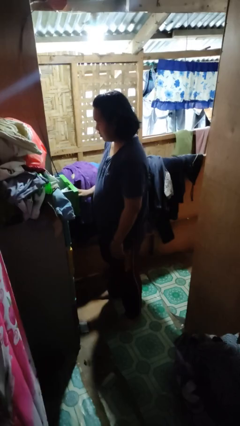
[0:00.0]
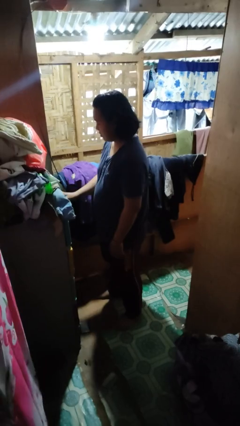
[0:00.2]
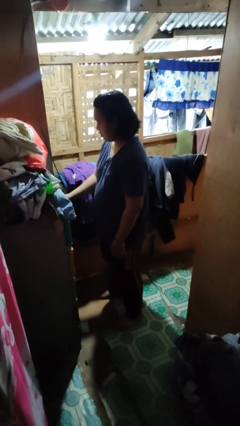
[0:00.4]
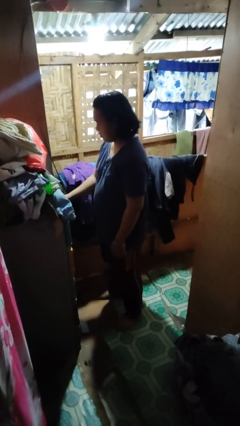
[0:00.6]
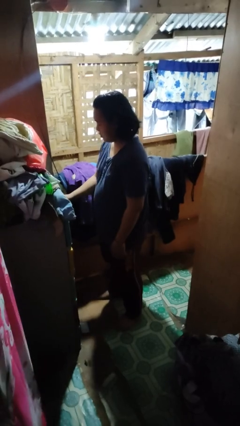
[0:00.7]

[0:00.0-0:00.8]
person closes dresser drawer

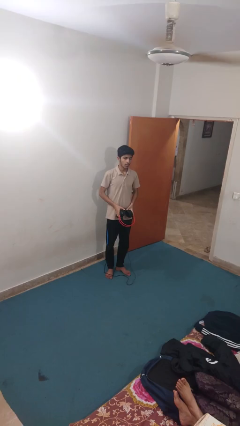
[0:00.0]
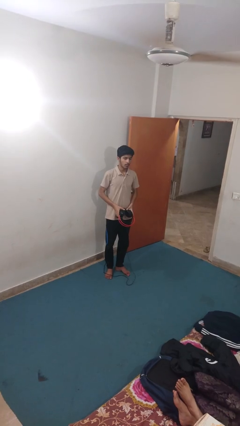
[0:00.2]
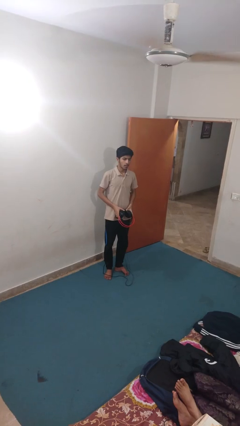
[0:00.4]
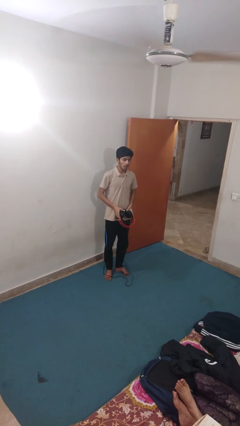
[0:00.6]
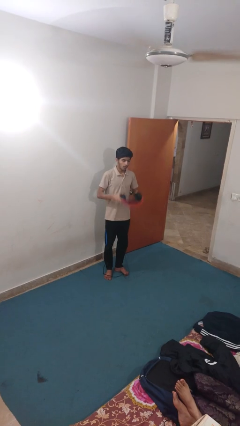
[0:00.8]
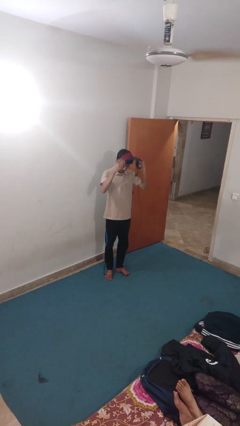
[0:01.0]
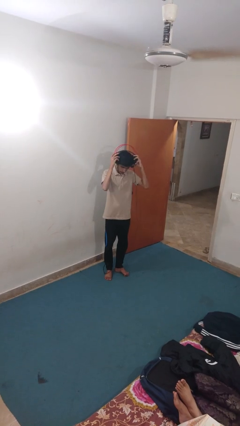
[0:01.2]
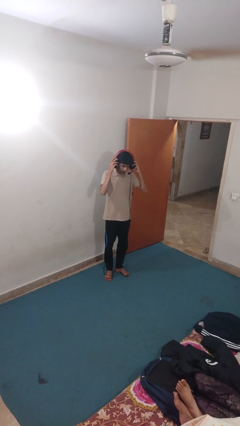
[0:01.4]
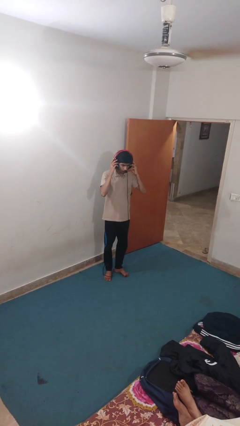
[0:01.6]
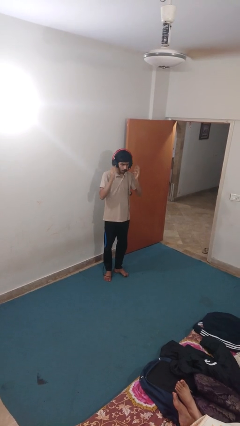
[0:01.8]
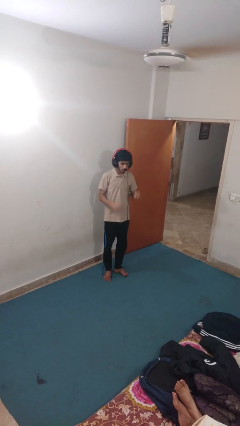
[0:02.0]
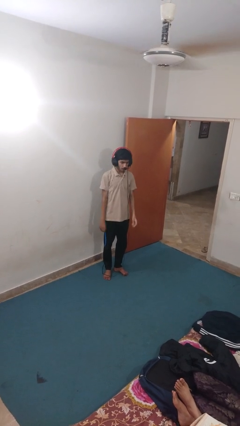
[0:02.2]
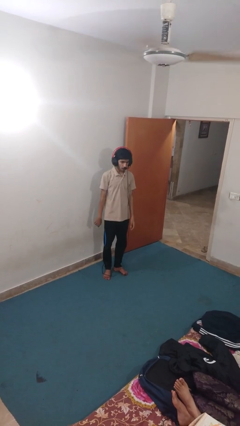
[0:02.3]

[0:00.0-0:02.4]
person puts on headphones

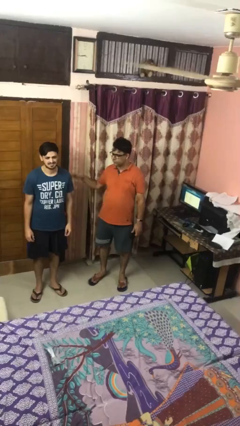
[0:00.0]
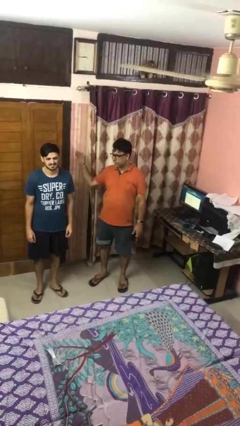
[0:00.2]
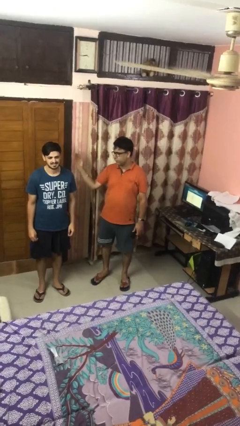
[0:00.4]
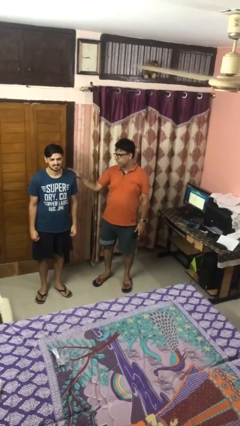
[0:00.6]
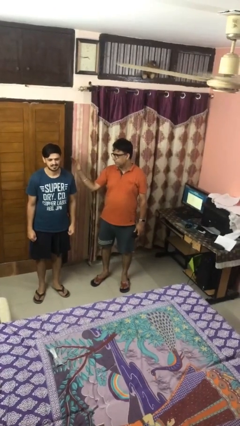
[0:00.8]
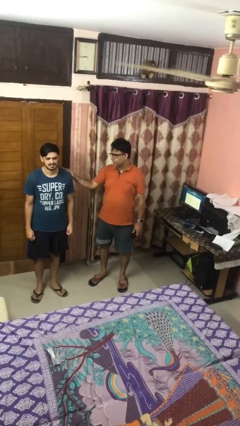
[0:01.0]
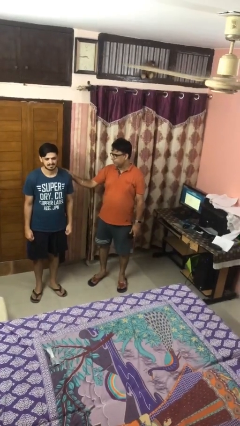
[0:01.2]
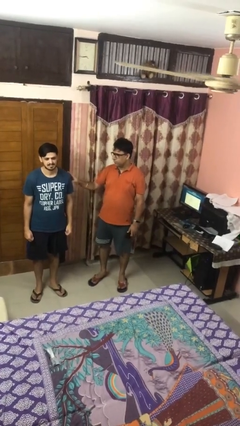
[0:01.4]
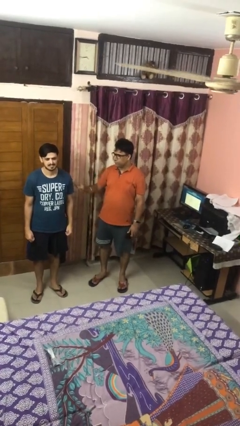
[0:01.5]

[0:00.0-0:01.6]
person pounds shoulders of person

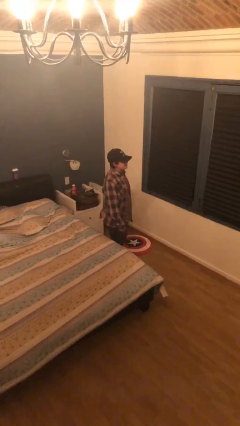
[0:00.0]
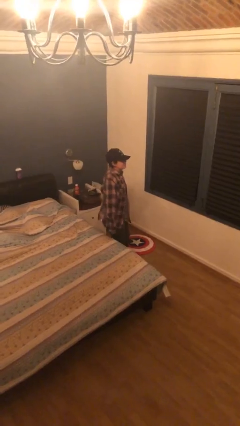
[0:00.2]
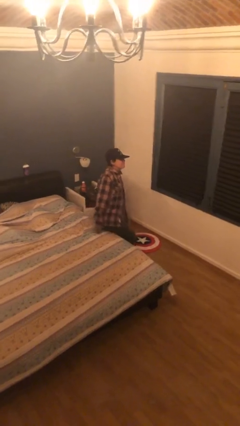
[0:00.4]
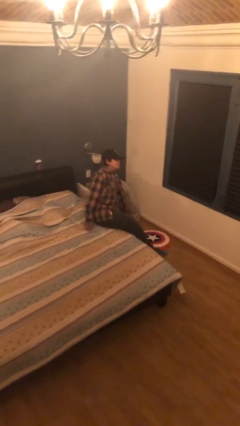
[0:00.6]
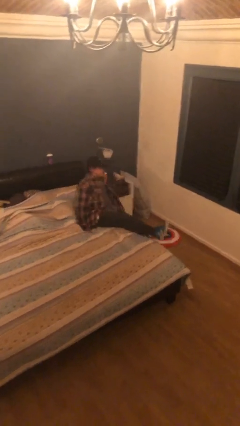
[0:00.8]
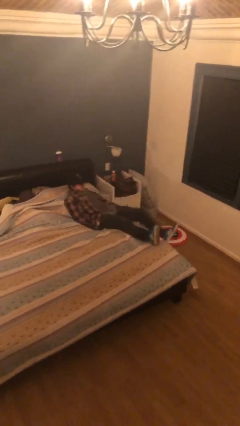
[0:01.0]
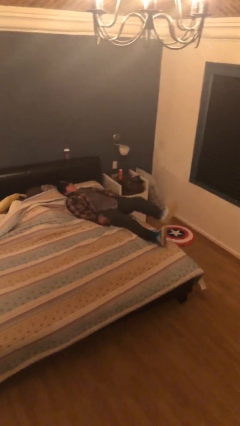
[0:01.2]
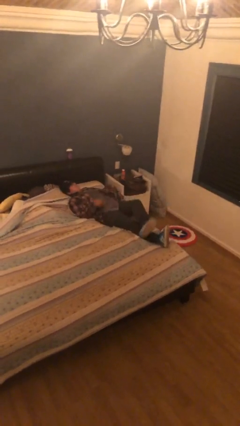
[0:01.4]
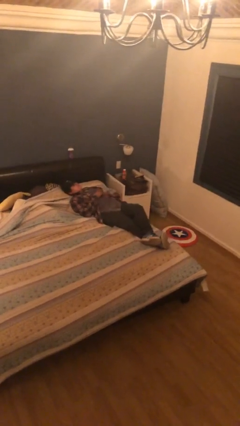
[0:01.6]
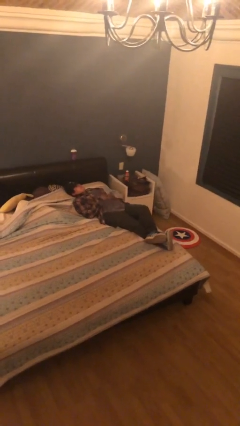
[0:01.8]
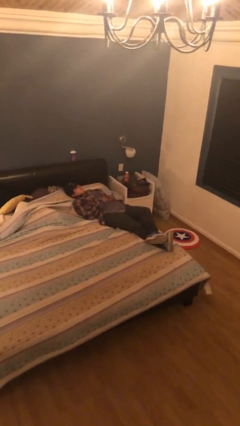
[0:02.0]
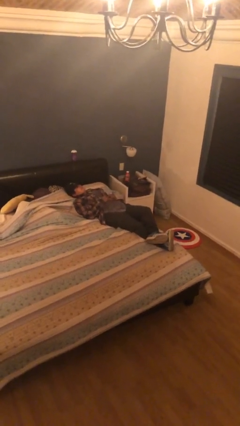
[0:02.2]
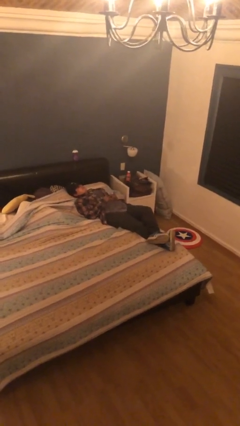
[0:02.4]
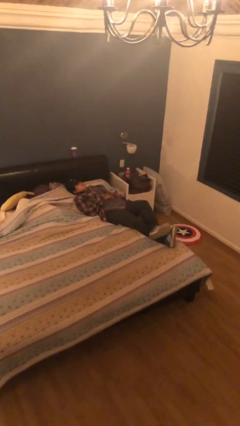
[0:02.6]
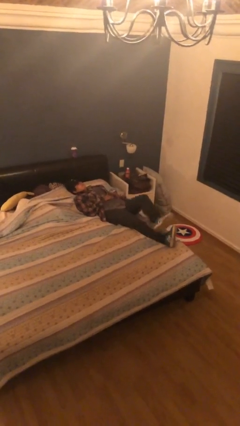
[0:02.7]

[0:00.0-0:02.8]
person lies down on bed

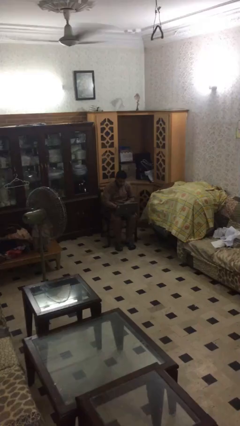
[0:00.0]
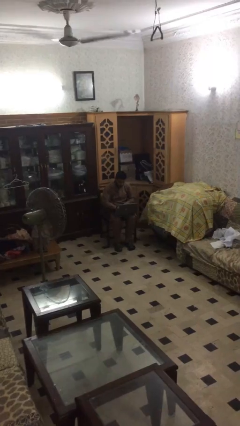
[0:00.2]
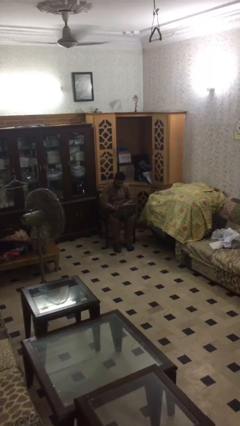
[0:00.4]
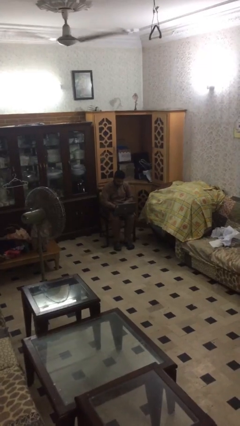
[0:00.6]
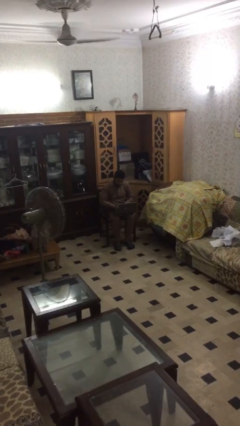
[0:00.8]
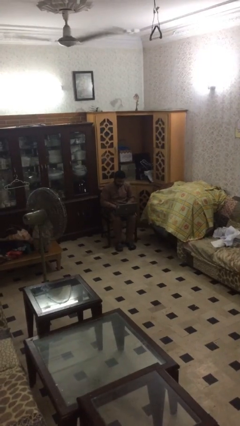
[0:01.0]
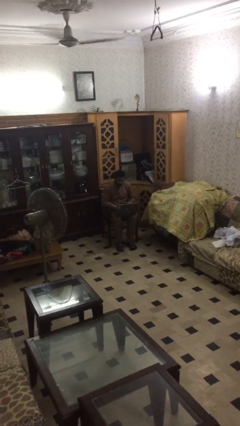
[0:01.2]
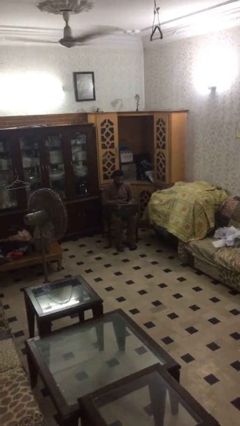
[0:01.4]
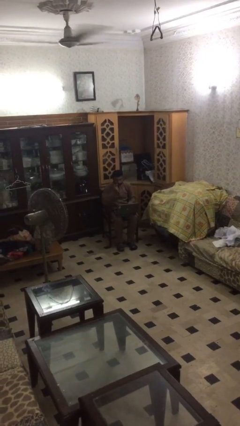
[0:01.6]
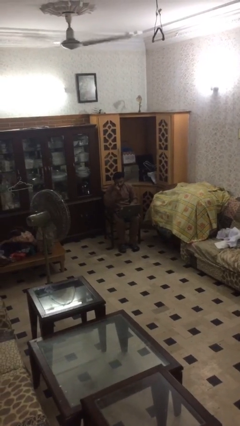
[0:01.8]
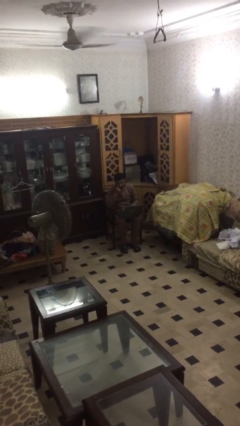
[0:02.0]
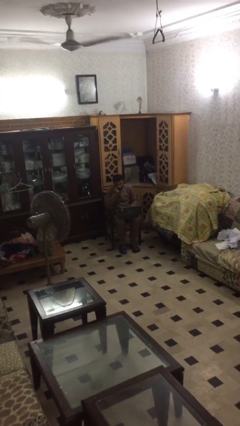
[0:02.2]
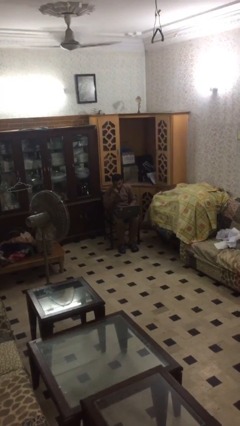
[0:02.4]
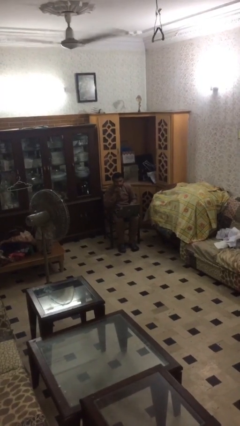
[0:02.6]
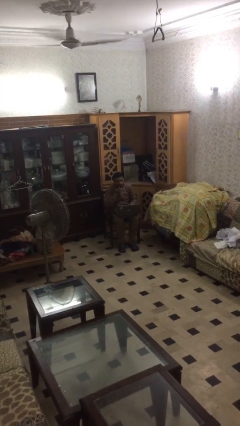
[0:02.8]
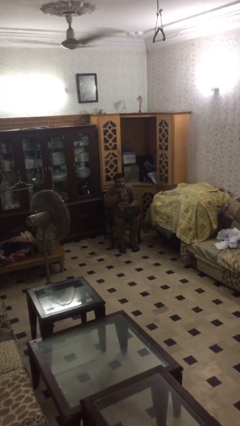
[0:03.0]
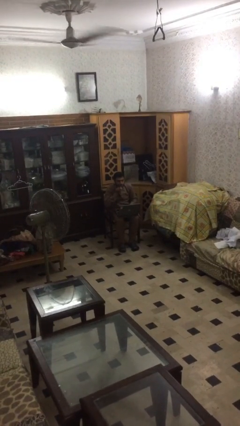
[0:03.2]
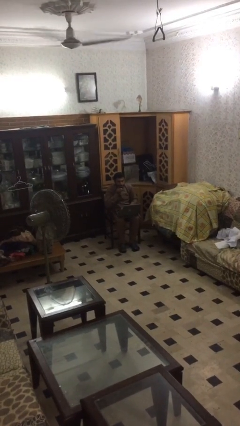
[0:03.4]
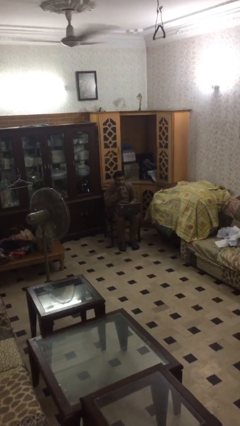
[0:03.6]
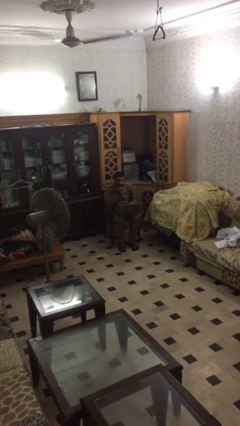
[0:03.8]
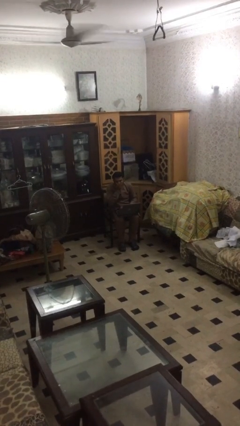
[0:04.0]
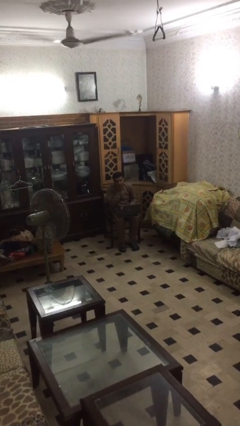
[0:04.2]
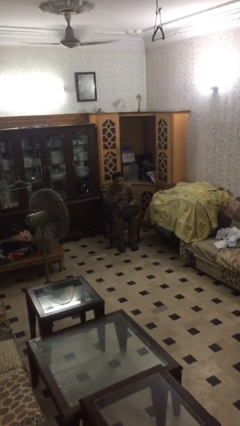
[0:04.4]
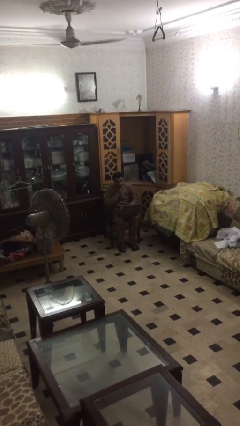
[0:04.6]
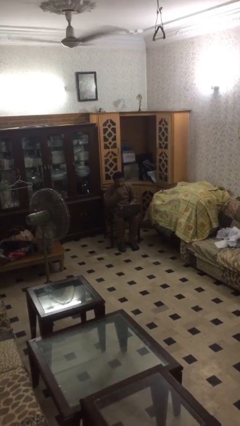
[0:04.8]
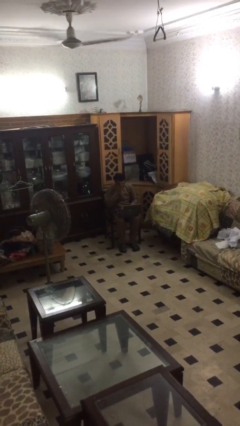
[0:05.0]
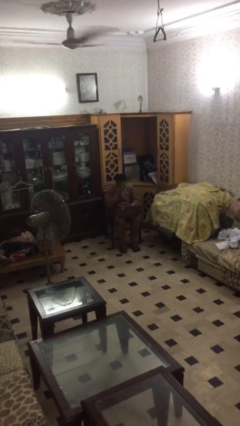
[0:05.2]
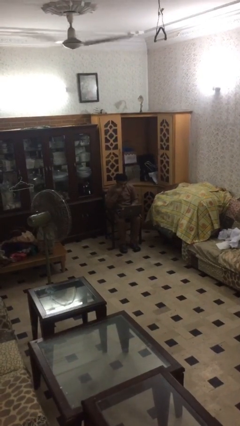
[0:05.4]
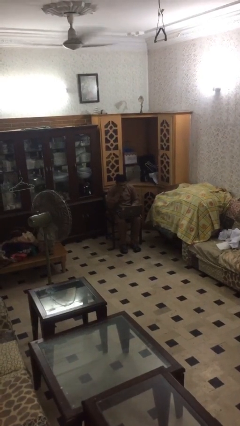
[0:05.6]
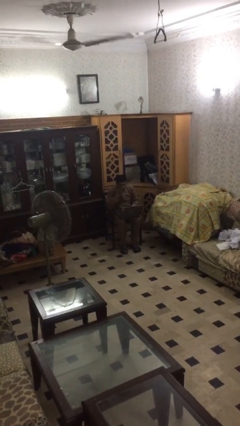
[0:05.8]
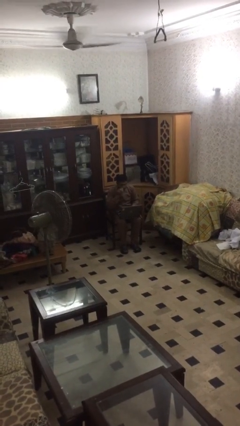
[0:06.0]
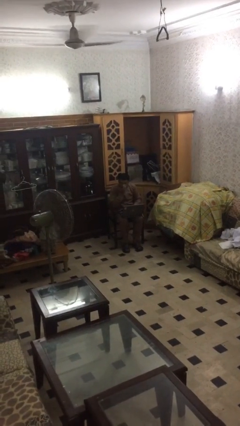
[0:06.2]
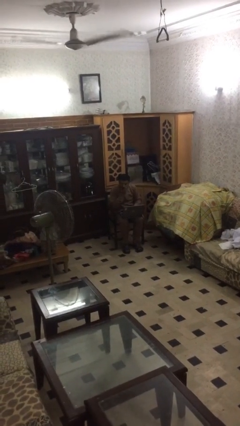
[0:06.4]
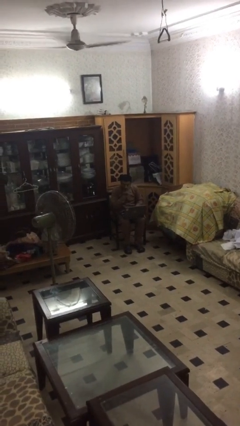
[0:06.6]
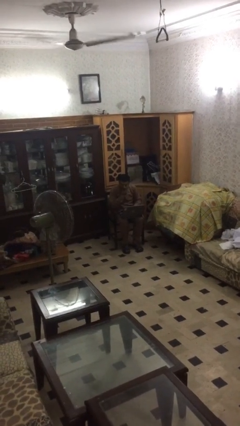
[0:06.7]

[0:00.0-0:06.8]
person interacts with laptop

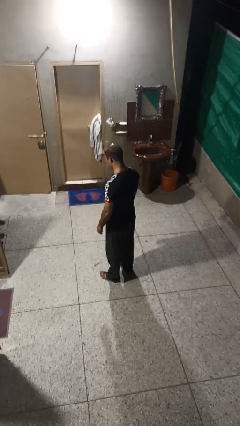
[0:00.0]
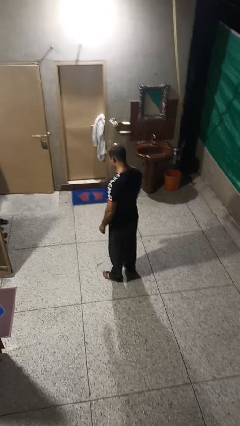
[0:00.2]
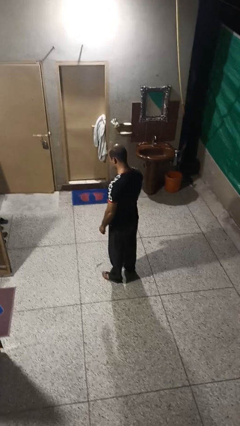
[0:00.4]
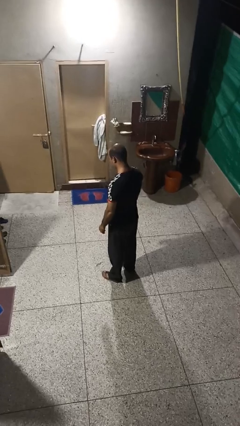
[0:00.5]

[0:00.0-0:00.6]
person rubs neck

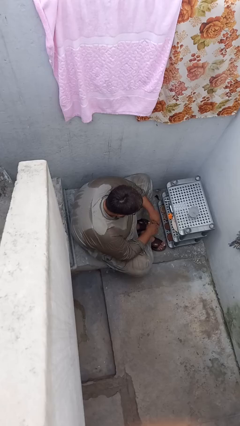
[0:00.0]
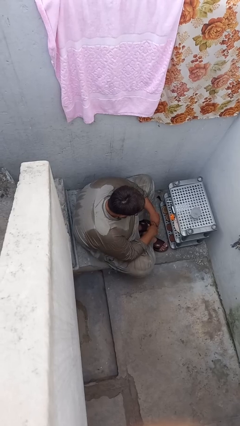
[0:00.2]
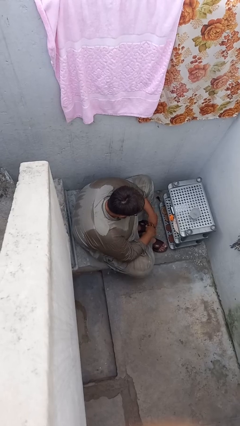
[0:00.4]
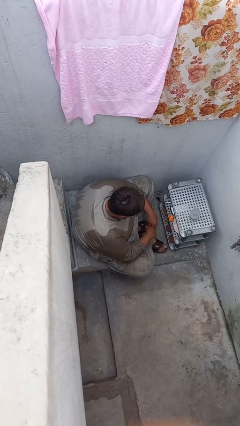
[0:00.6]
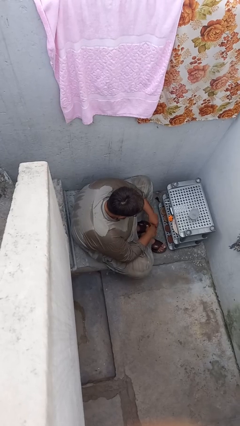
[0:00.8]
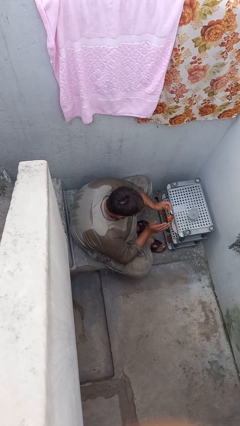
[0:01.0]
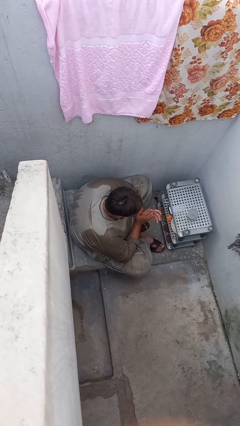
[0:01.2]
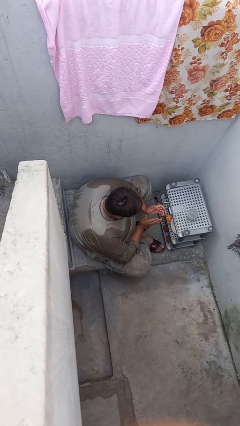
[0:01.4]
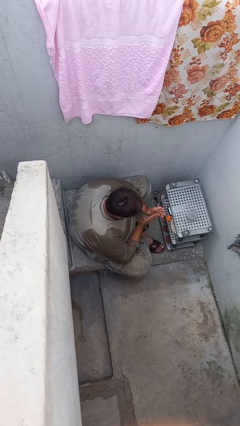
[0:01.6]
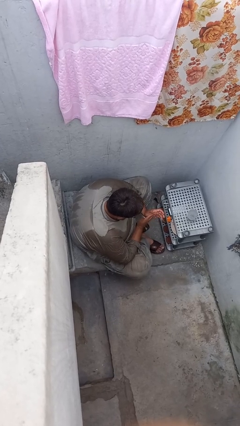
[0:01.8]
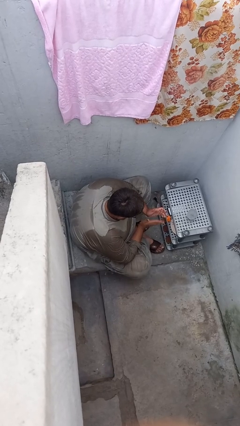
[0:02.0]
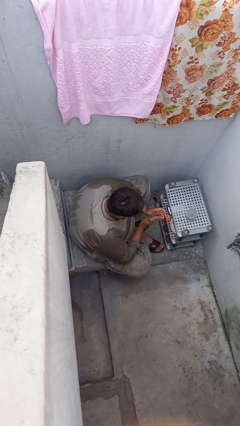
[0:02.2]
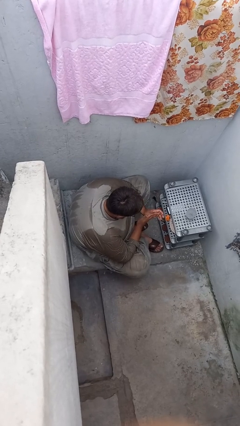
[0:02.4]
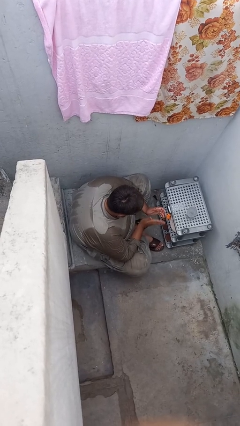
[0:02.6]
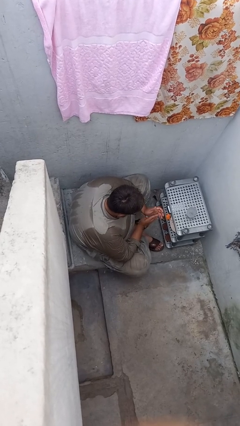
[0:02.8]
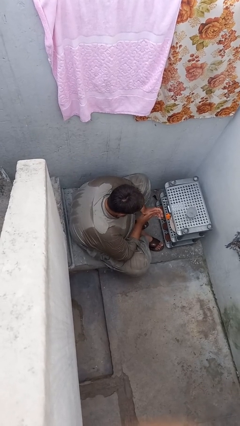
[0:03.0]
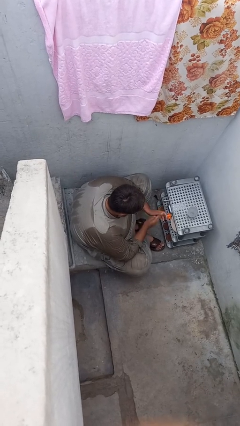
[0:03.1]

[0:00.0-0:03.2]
person claps hands
